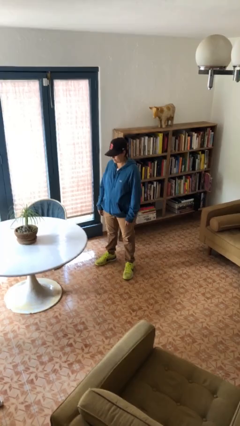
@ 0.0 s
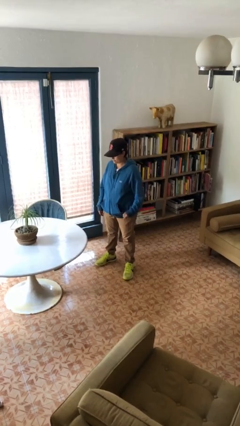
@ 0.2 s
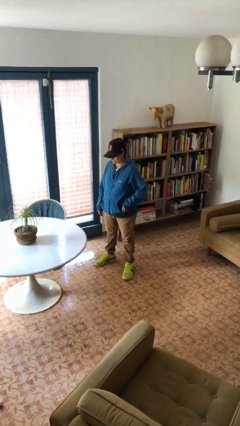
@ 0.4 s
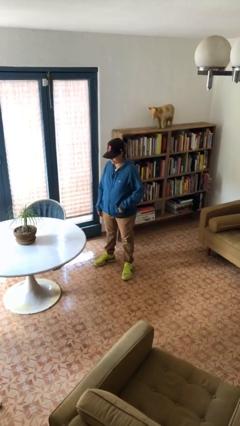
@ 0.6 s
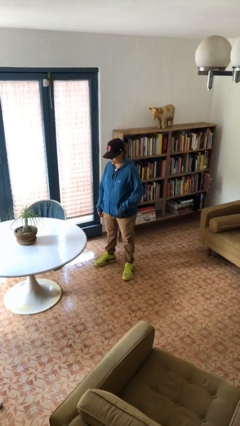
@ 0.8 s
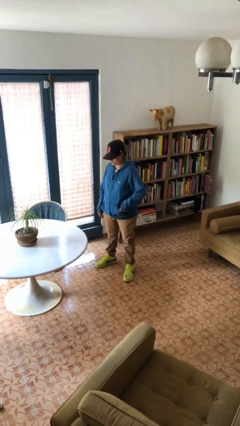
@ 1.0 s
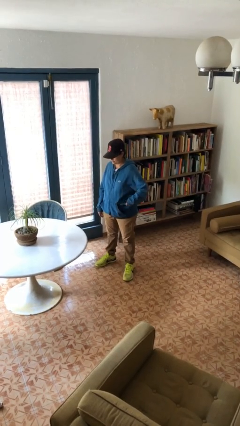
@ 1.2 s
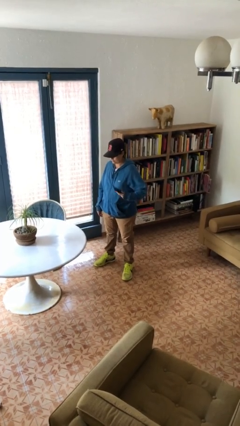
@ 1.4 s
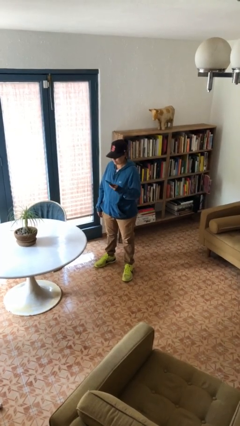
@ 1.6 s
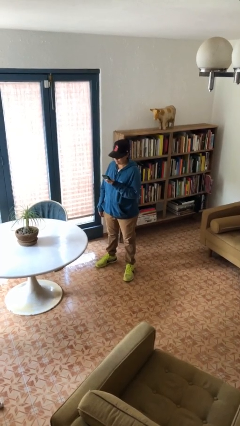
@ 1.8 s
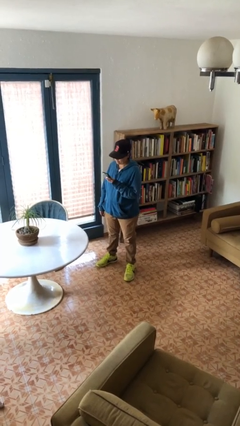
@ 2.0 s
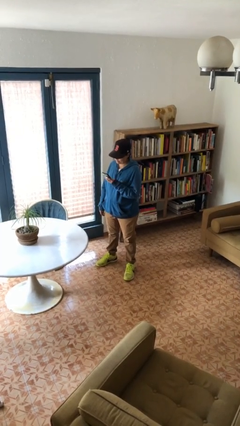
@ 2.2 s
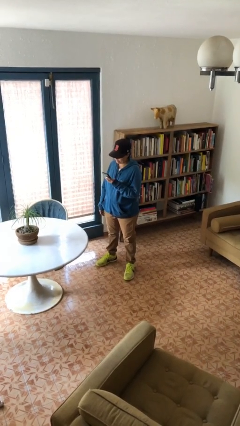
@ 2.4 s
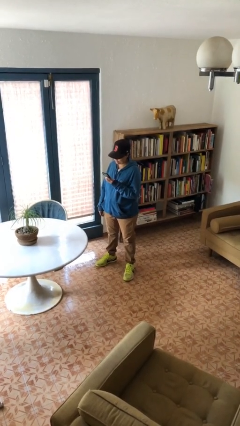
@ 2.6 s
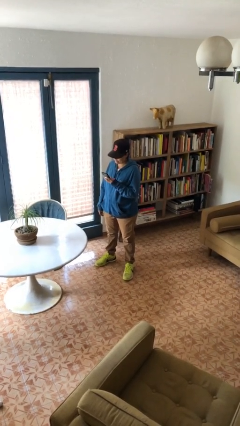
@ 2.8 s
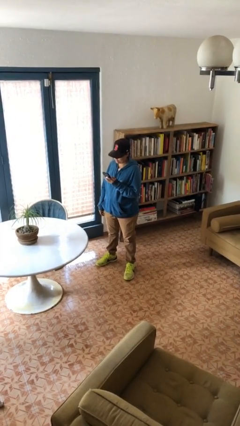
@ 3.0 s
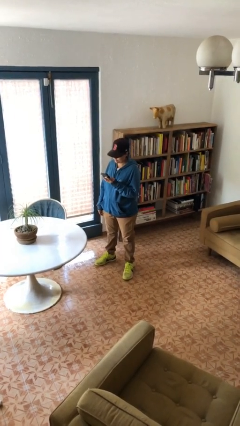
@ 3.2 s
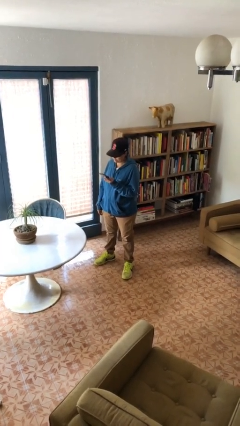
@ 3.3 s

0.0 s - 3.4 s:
person takes phone from pocket

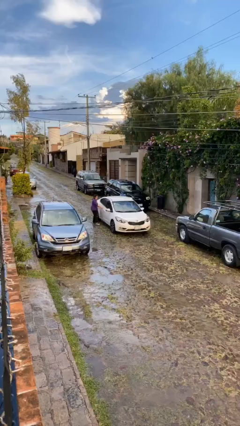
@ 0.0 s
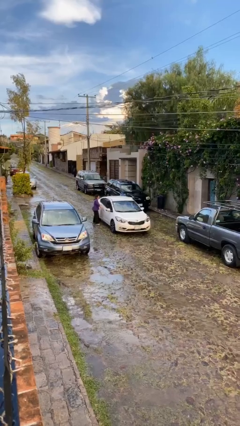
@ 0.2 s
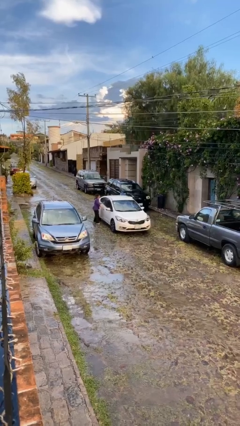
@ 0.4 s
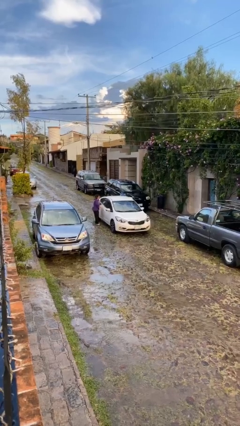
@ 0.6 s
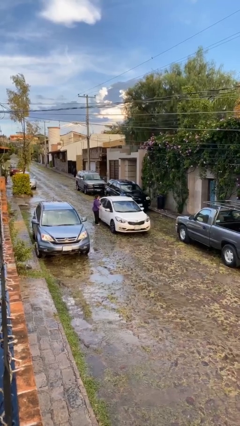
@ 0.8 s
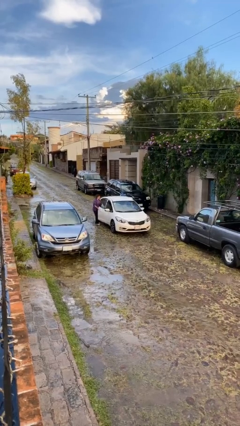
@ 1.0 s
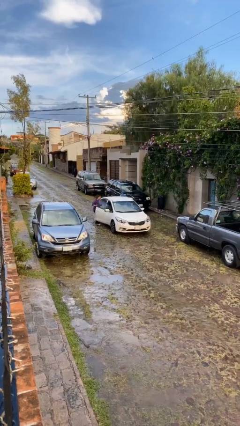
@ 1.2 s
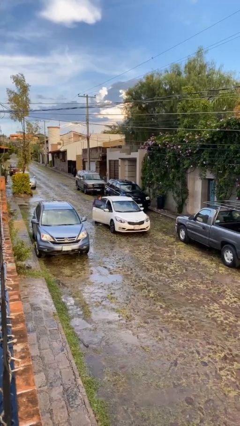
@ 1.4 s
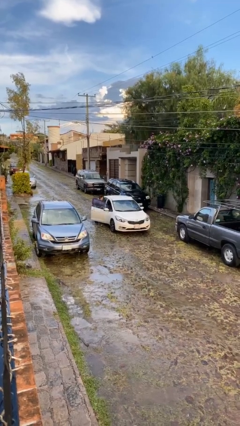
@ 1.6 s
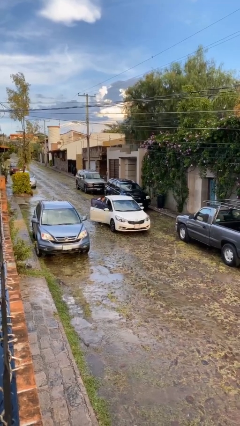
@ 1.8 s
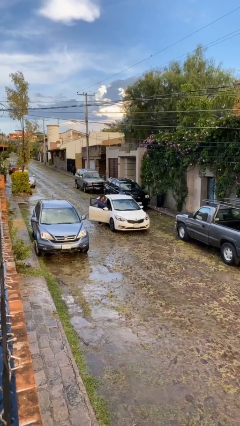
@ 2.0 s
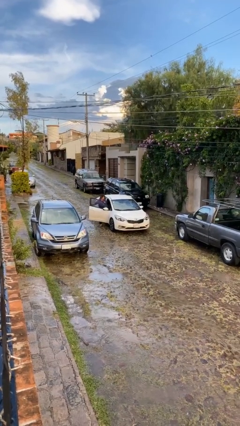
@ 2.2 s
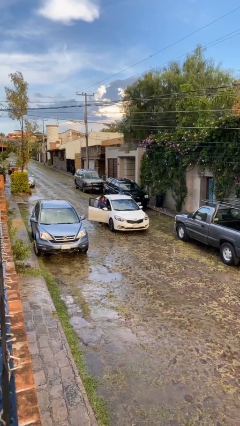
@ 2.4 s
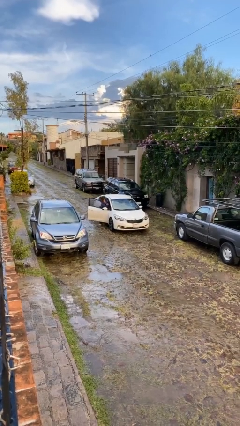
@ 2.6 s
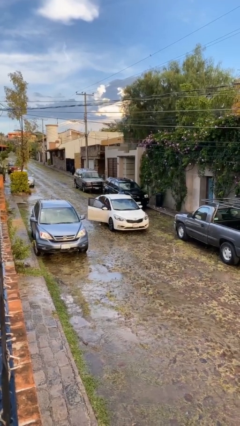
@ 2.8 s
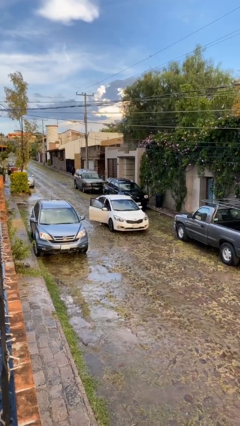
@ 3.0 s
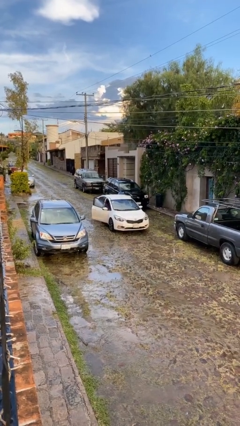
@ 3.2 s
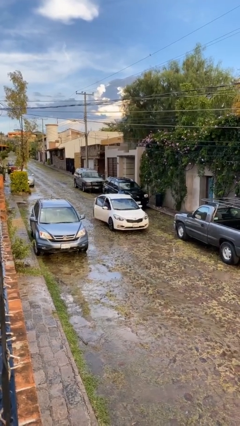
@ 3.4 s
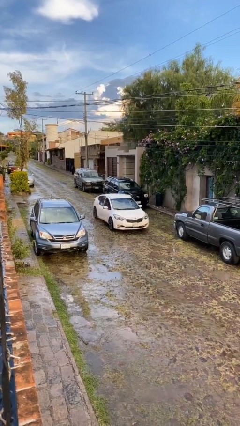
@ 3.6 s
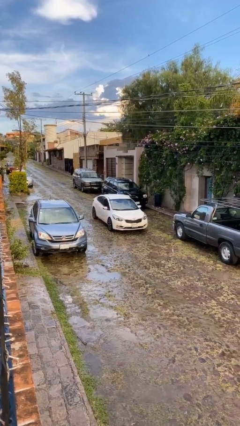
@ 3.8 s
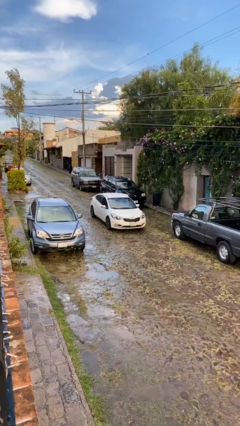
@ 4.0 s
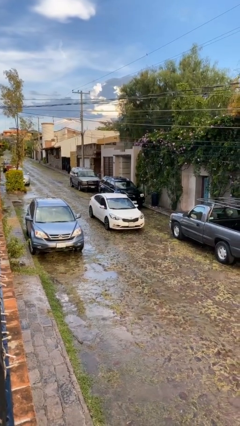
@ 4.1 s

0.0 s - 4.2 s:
car picks up person

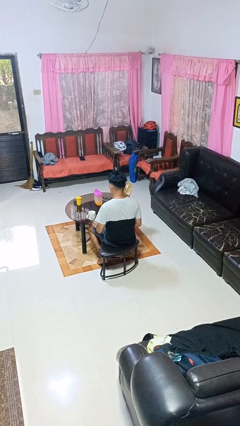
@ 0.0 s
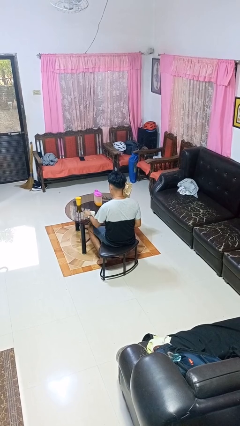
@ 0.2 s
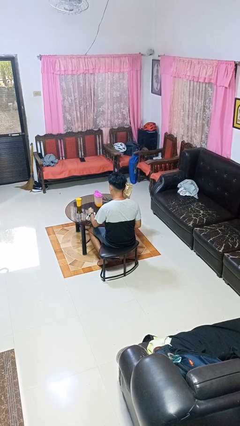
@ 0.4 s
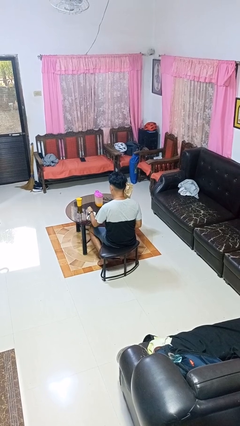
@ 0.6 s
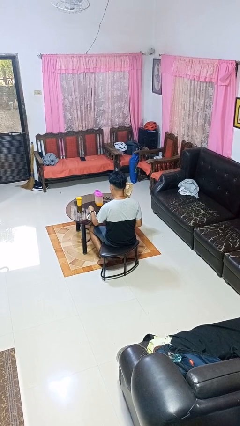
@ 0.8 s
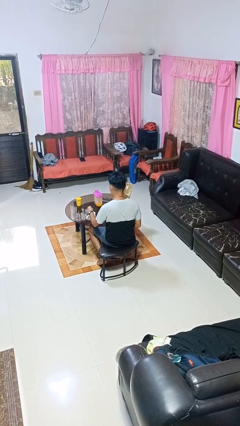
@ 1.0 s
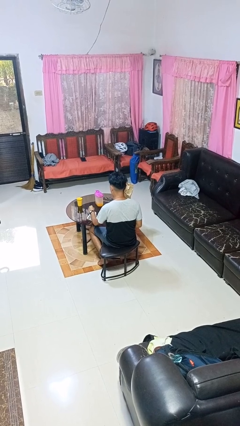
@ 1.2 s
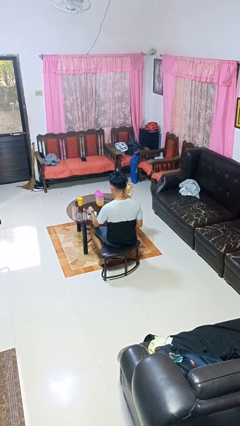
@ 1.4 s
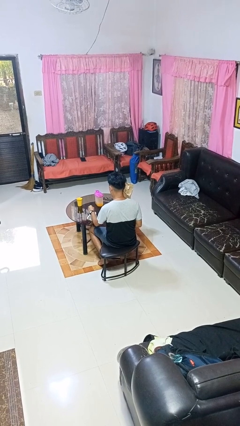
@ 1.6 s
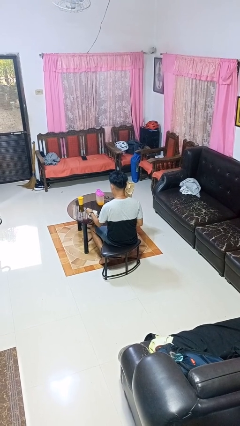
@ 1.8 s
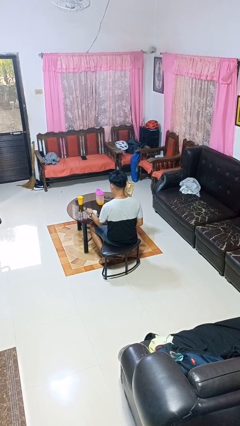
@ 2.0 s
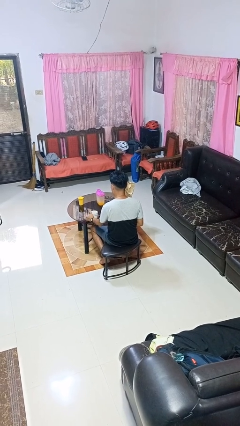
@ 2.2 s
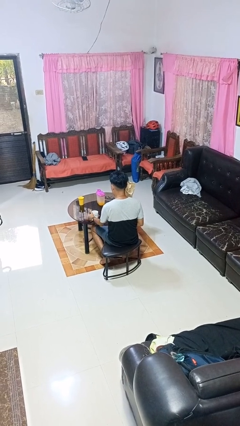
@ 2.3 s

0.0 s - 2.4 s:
person stirs mug

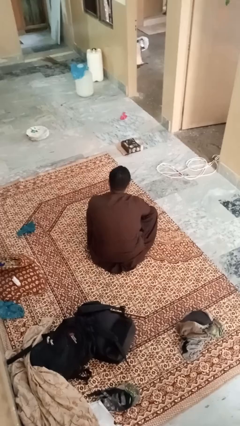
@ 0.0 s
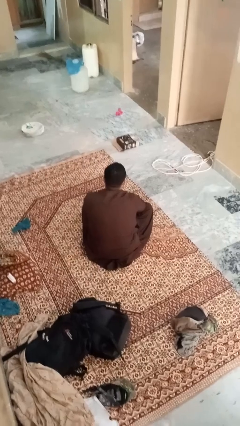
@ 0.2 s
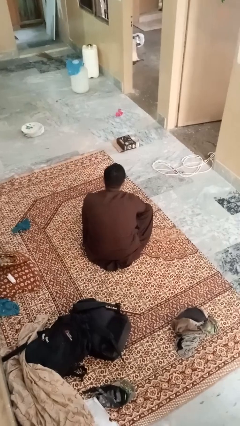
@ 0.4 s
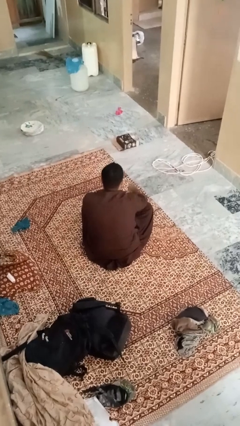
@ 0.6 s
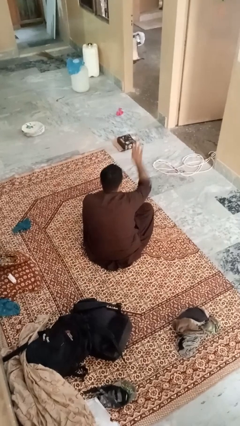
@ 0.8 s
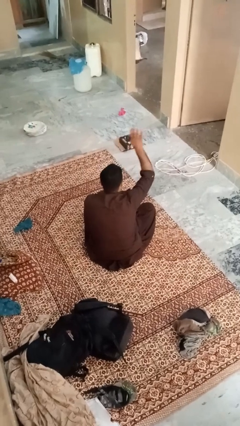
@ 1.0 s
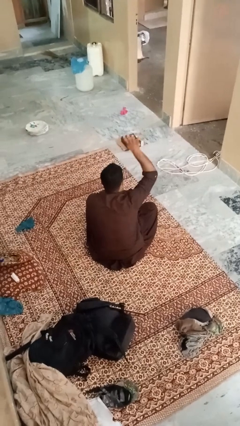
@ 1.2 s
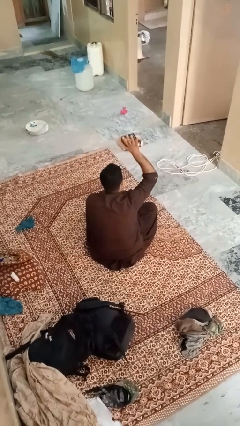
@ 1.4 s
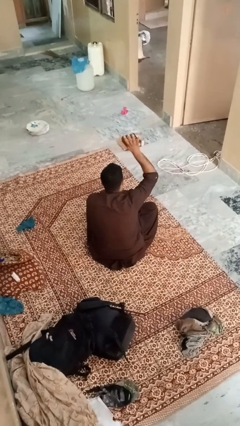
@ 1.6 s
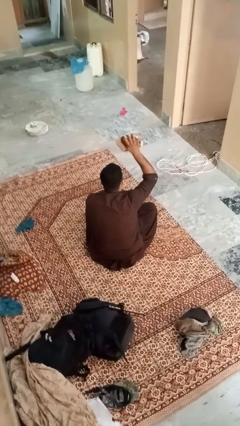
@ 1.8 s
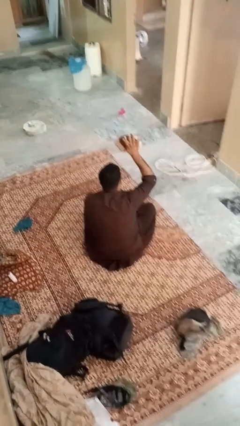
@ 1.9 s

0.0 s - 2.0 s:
person gestures number four

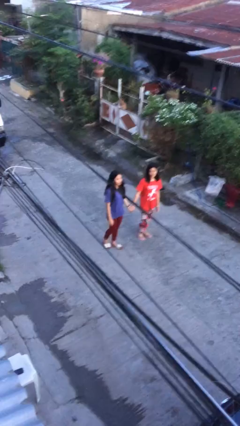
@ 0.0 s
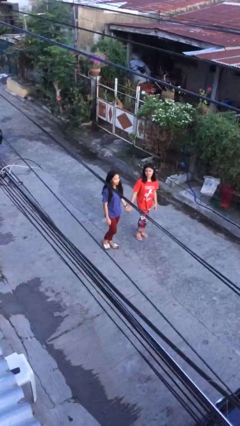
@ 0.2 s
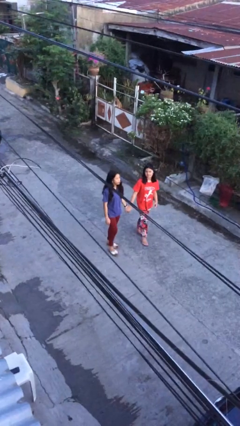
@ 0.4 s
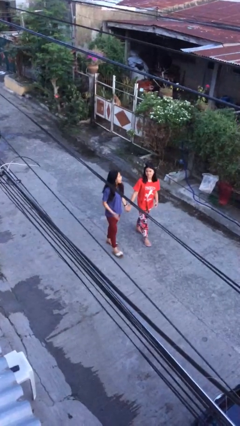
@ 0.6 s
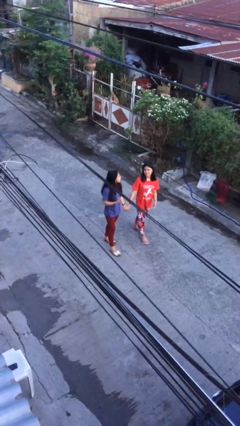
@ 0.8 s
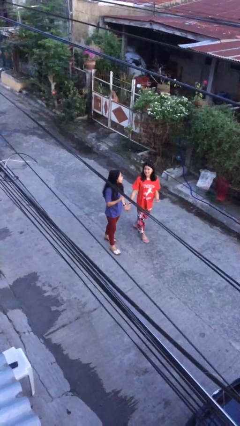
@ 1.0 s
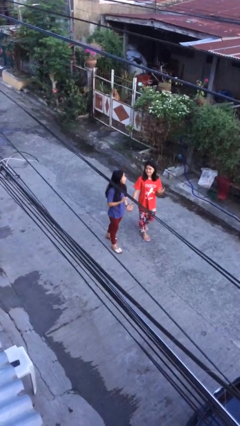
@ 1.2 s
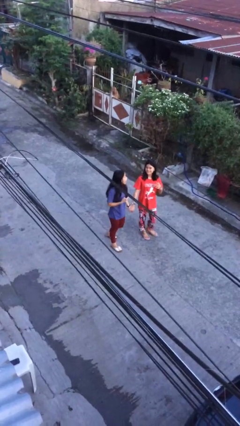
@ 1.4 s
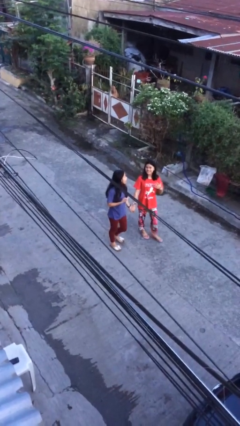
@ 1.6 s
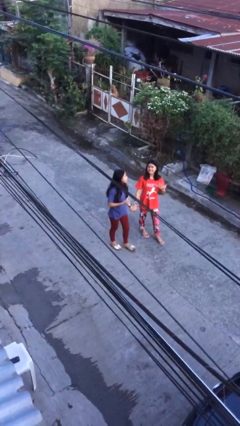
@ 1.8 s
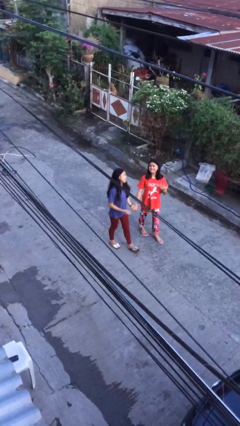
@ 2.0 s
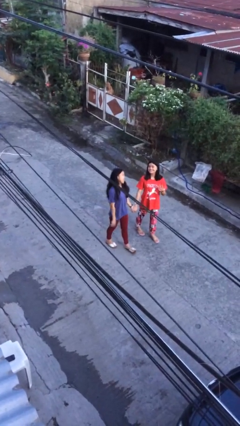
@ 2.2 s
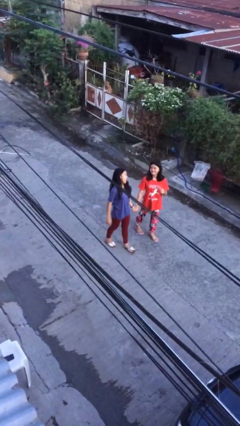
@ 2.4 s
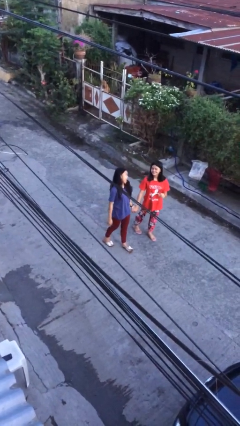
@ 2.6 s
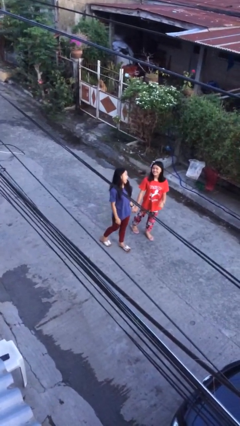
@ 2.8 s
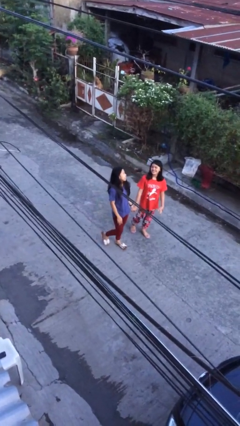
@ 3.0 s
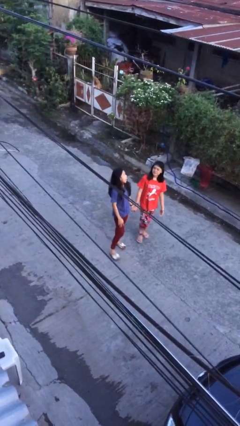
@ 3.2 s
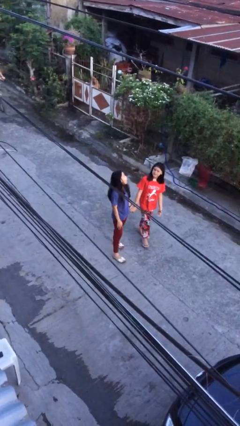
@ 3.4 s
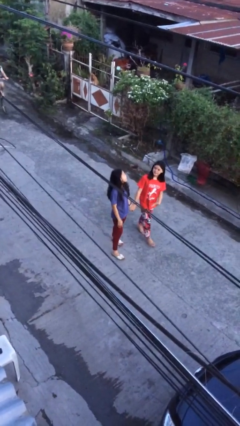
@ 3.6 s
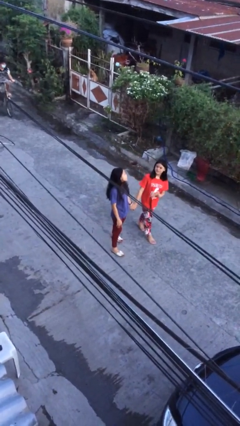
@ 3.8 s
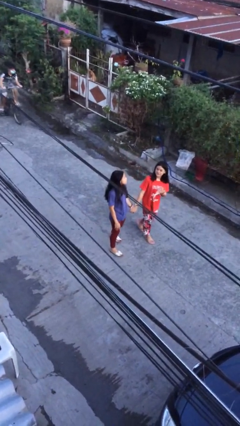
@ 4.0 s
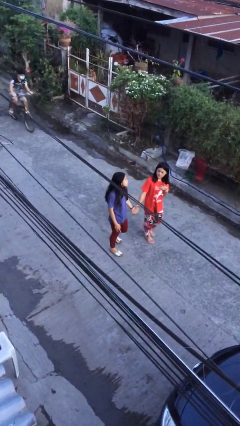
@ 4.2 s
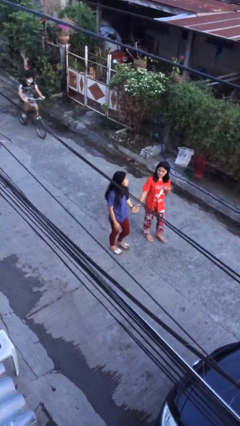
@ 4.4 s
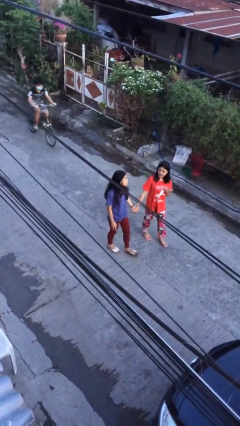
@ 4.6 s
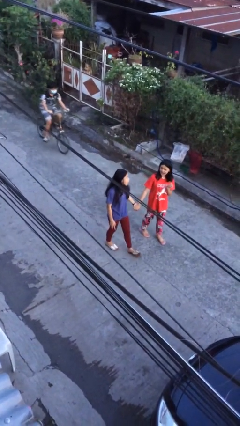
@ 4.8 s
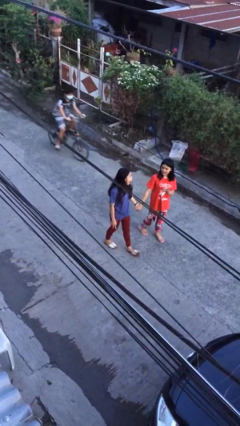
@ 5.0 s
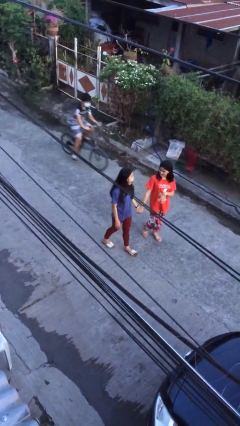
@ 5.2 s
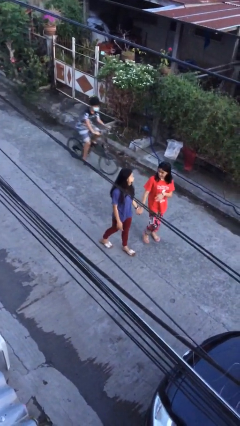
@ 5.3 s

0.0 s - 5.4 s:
person holds hand
